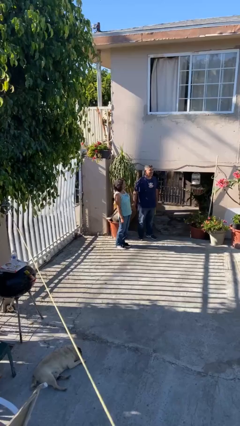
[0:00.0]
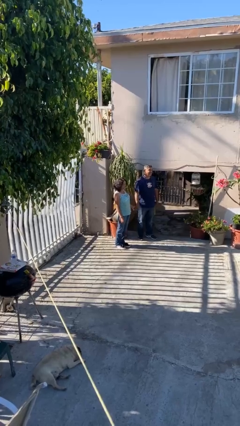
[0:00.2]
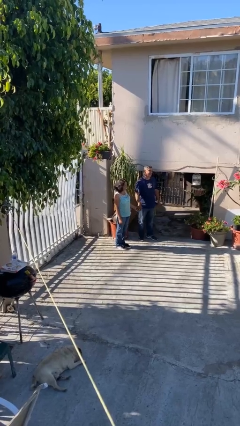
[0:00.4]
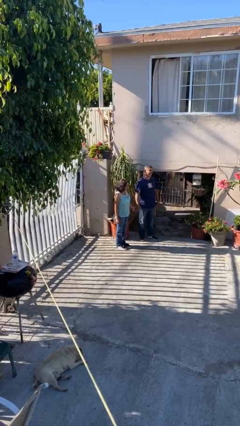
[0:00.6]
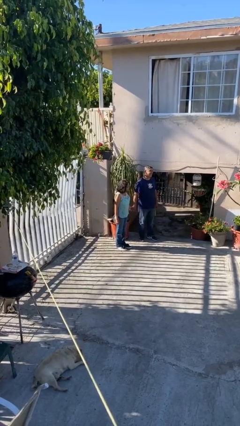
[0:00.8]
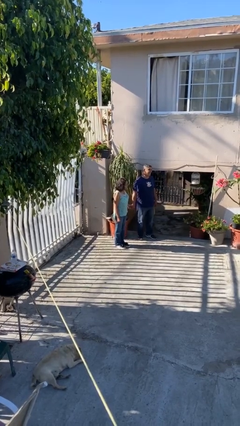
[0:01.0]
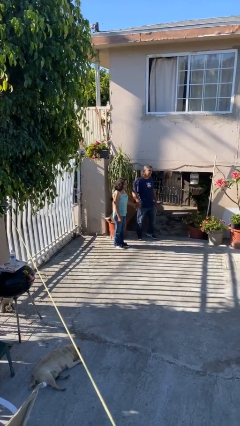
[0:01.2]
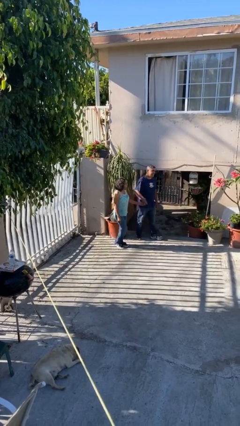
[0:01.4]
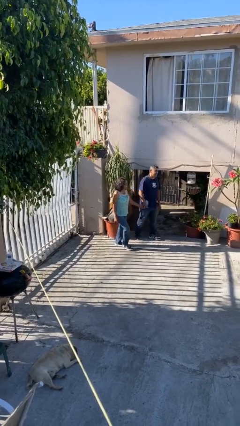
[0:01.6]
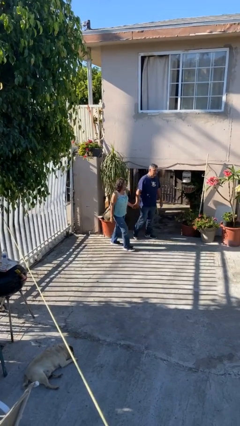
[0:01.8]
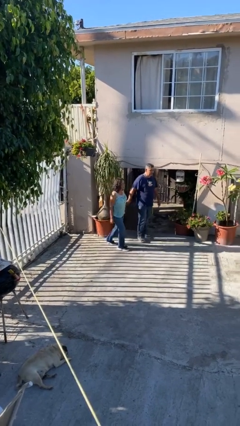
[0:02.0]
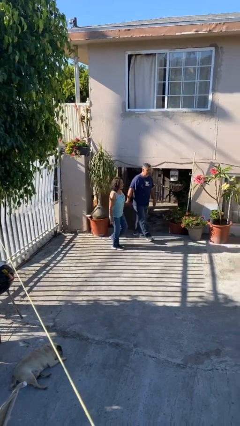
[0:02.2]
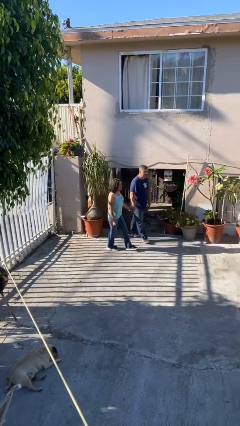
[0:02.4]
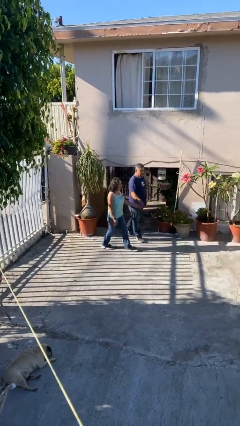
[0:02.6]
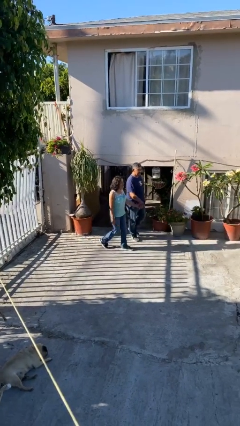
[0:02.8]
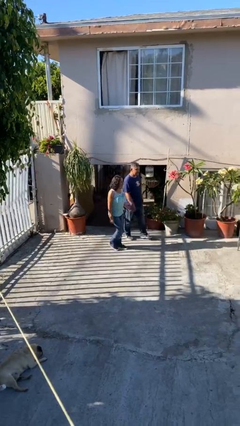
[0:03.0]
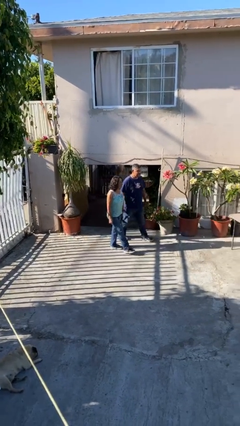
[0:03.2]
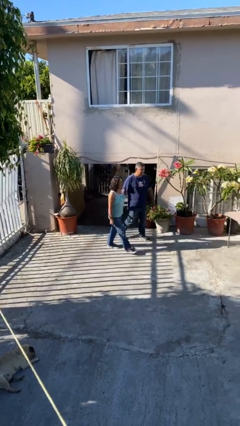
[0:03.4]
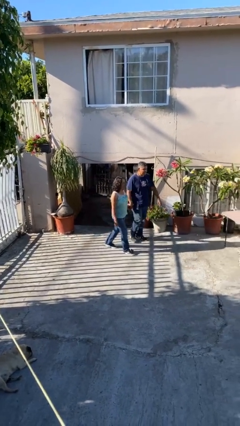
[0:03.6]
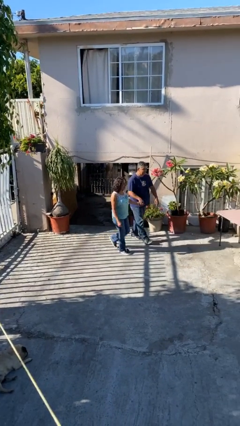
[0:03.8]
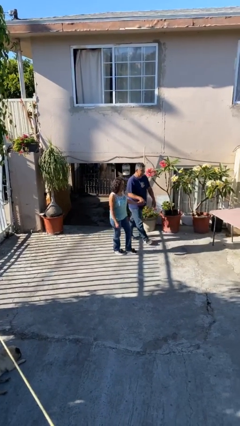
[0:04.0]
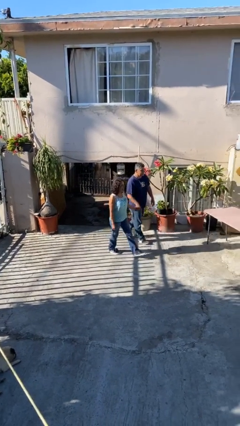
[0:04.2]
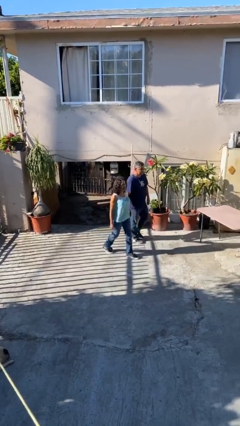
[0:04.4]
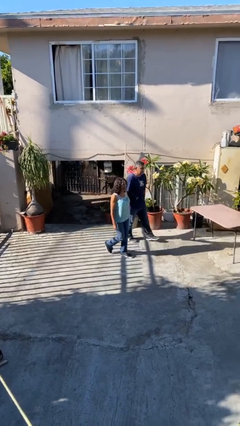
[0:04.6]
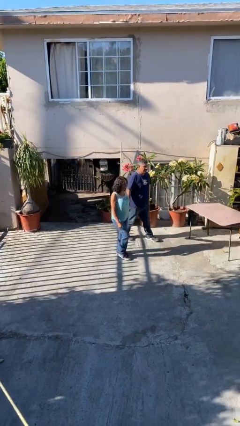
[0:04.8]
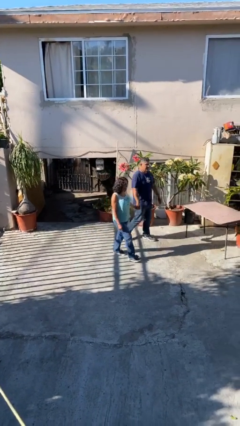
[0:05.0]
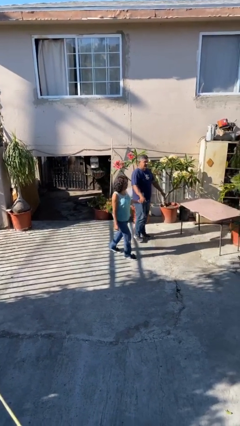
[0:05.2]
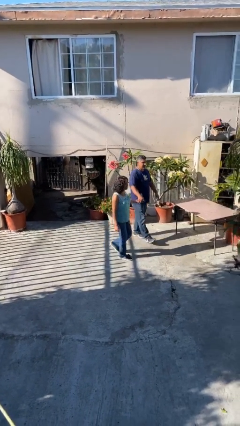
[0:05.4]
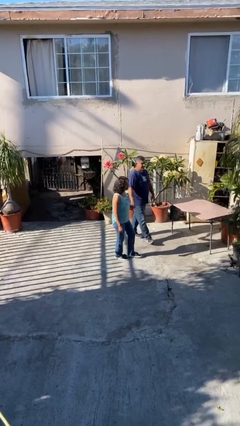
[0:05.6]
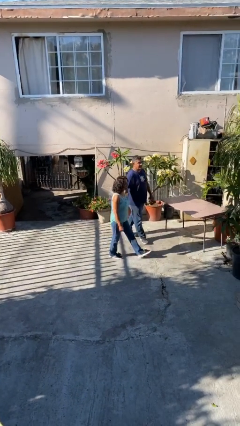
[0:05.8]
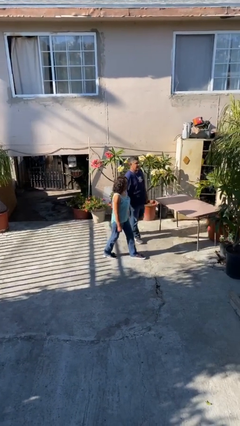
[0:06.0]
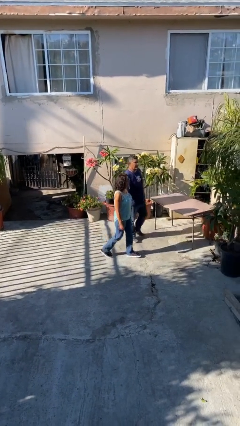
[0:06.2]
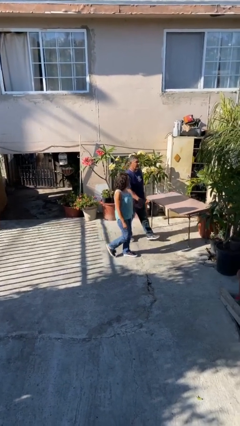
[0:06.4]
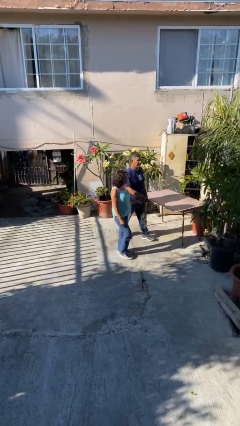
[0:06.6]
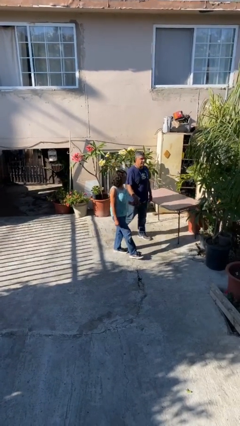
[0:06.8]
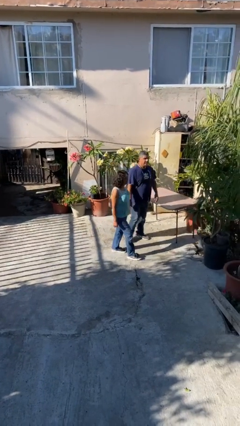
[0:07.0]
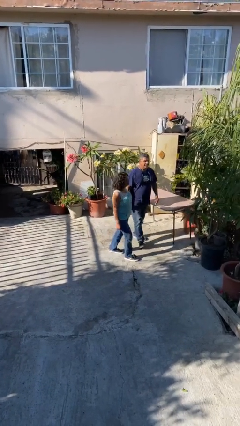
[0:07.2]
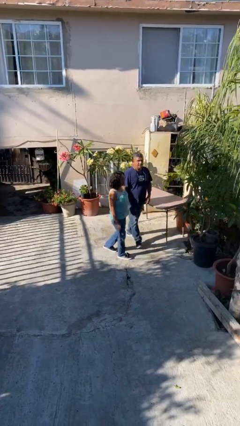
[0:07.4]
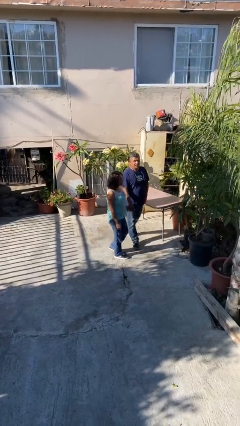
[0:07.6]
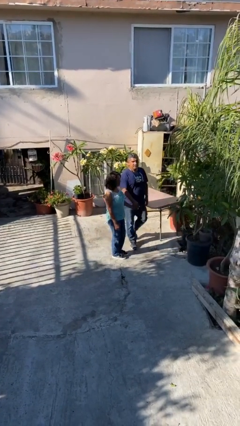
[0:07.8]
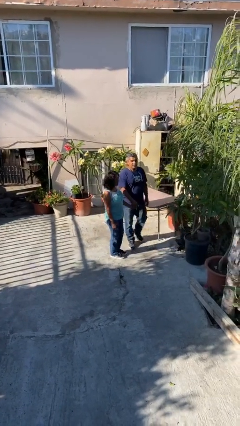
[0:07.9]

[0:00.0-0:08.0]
person holds hand

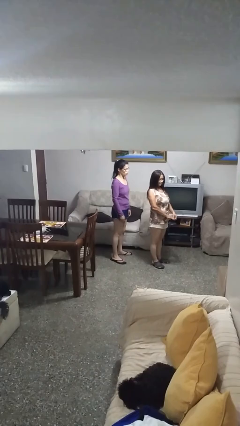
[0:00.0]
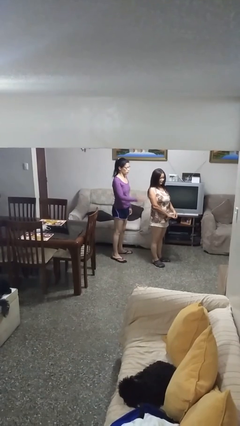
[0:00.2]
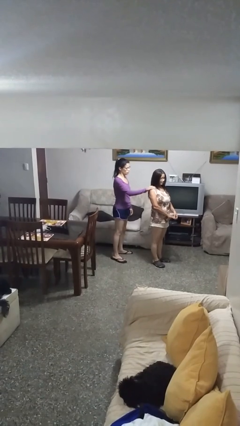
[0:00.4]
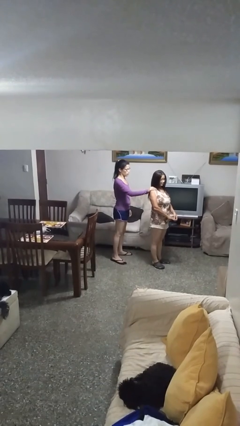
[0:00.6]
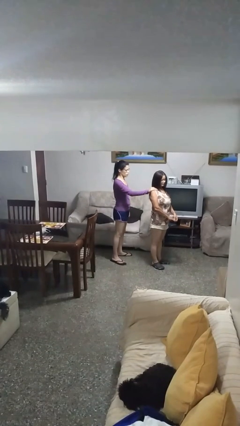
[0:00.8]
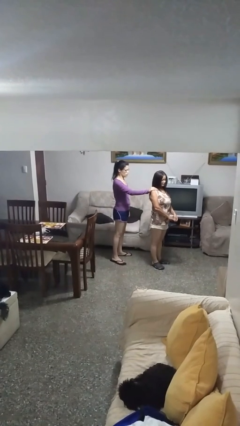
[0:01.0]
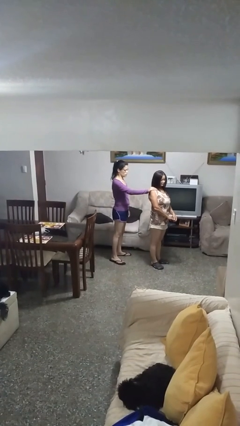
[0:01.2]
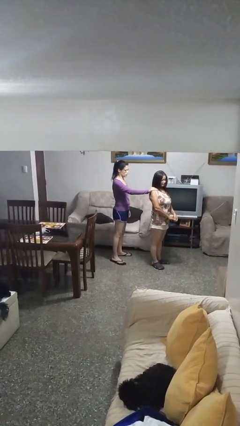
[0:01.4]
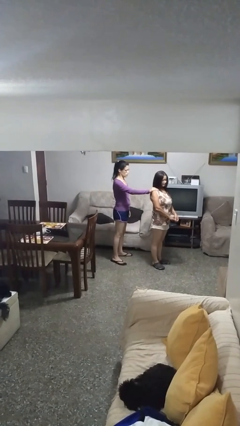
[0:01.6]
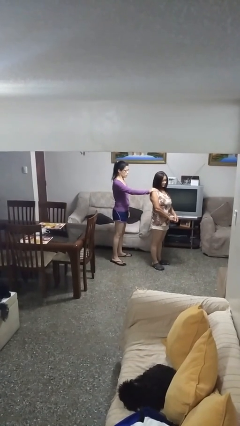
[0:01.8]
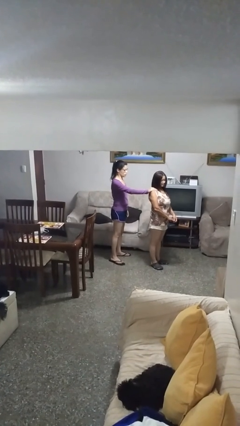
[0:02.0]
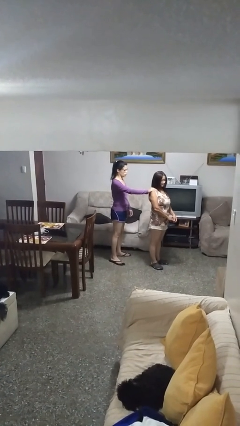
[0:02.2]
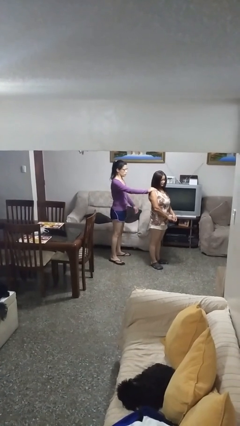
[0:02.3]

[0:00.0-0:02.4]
person grabs person by shoulder

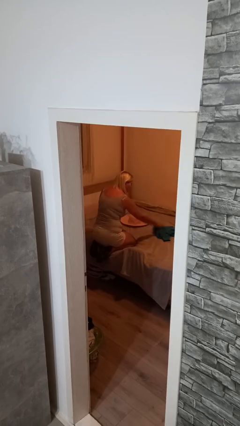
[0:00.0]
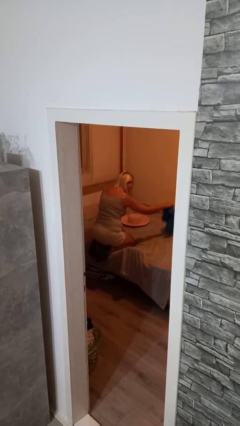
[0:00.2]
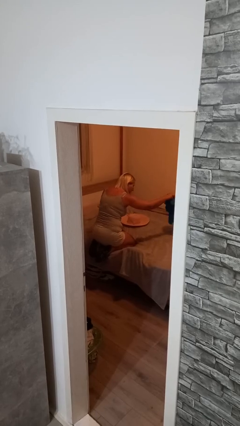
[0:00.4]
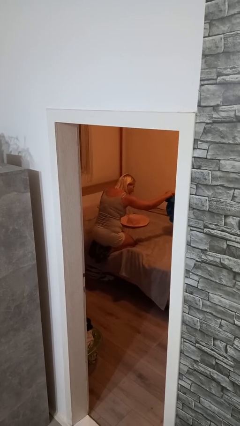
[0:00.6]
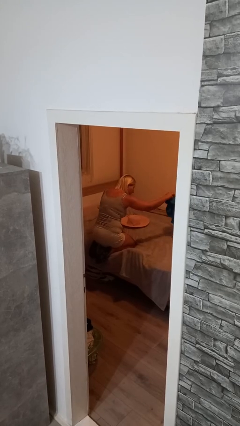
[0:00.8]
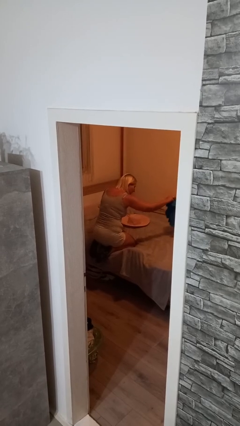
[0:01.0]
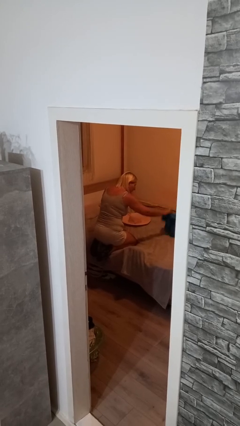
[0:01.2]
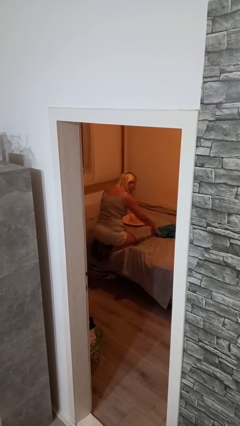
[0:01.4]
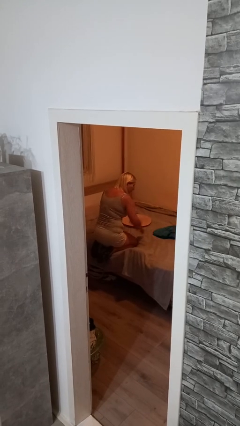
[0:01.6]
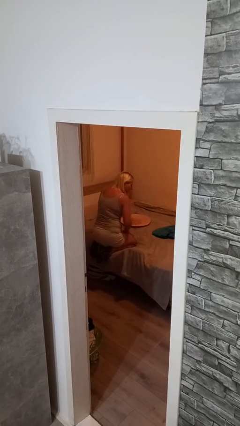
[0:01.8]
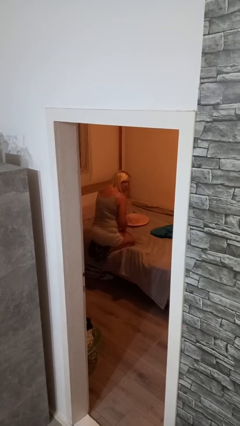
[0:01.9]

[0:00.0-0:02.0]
person searches under bed

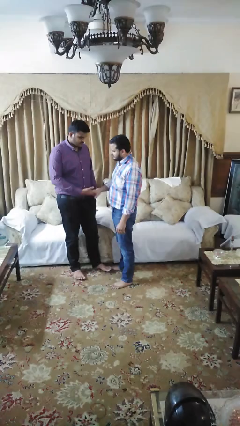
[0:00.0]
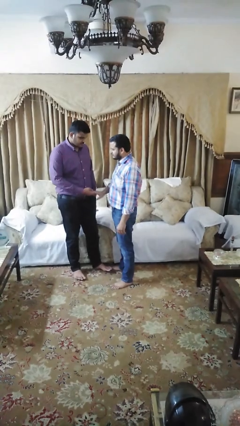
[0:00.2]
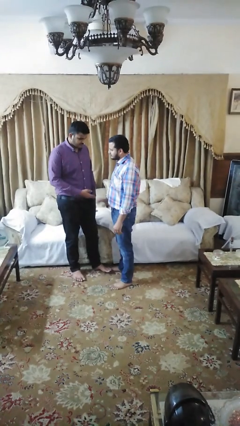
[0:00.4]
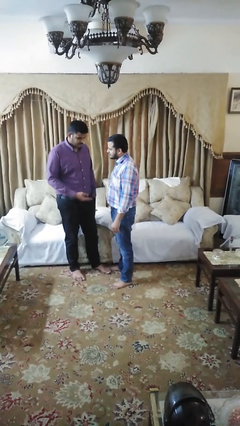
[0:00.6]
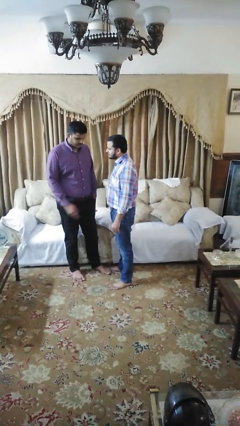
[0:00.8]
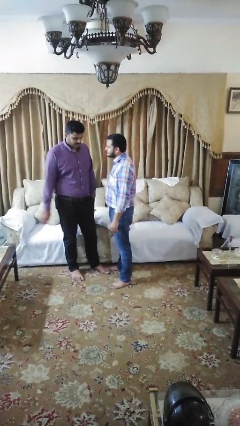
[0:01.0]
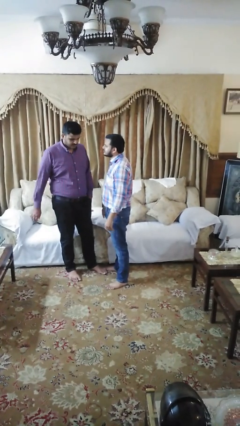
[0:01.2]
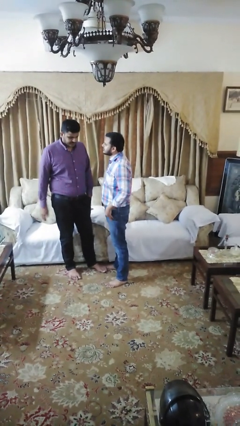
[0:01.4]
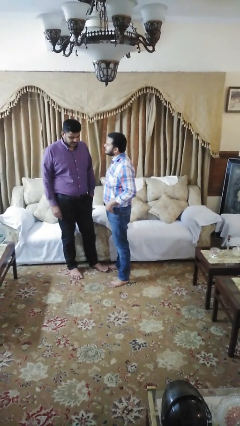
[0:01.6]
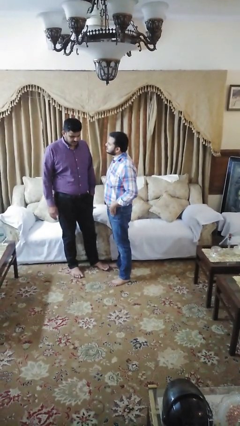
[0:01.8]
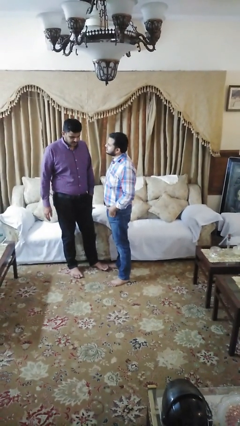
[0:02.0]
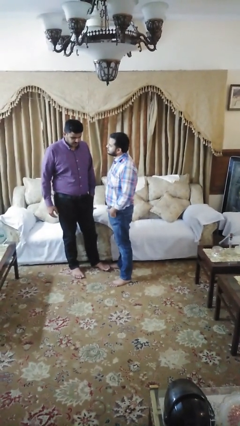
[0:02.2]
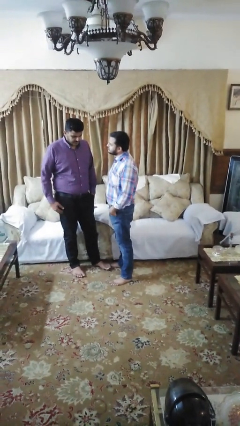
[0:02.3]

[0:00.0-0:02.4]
person highfives hand

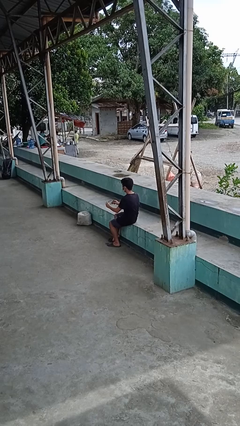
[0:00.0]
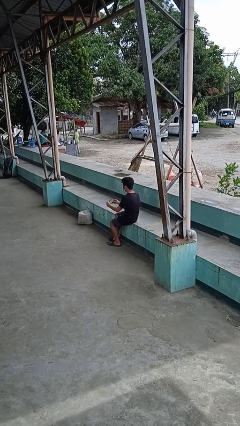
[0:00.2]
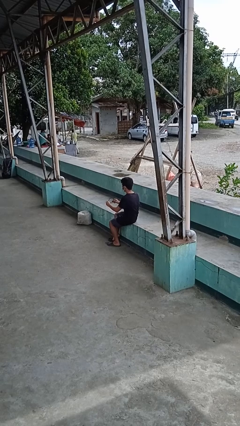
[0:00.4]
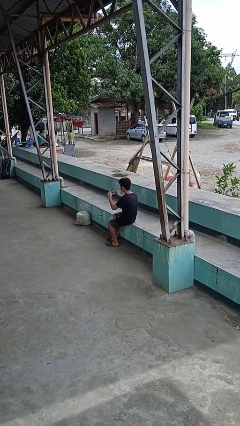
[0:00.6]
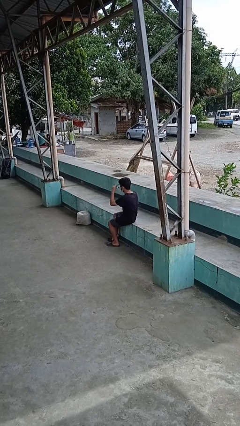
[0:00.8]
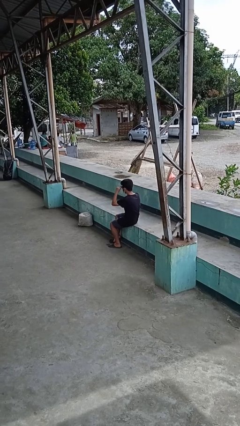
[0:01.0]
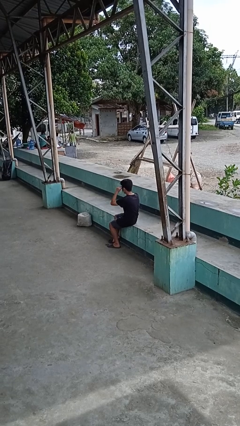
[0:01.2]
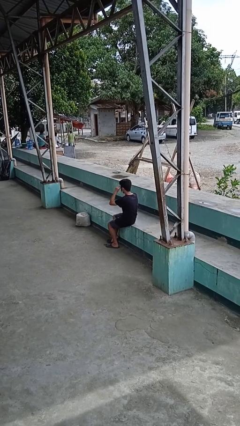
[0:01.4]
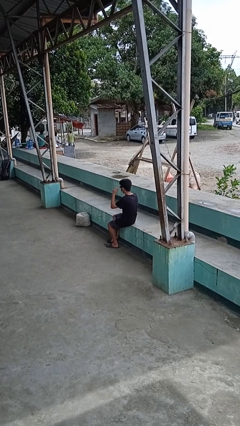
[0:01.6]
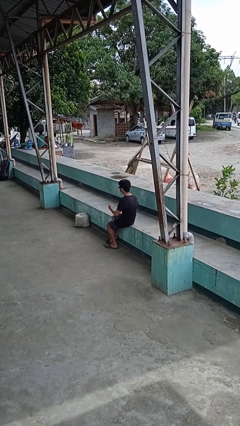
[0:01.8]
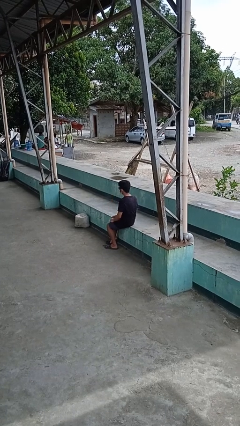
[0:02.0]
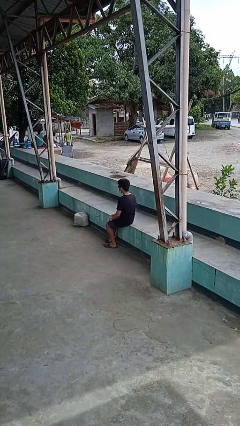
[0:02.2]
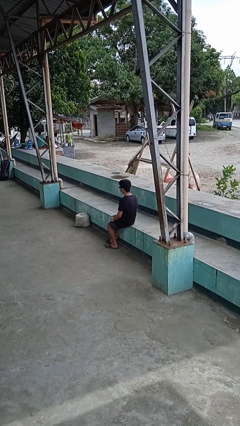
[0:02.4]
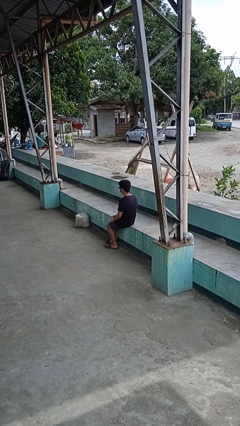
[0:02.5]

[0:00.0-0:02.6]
person puts on sunglasses

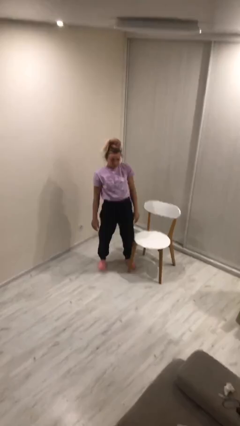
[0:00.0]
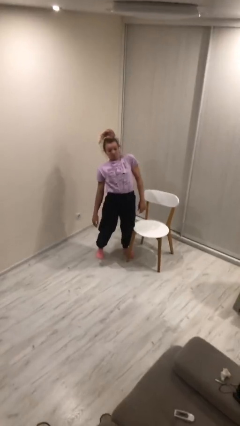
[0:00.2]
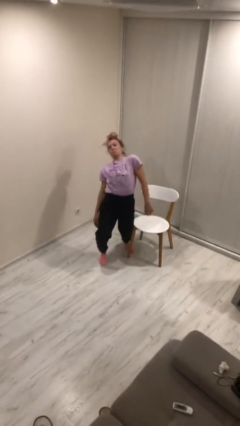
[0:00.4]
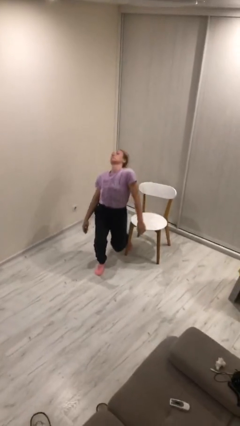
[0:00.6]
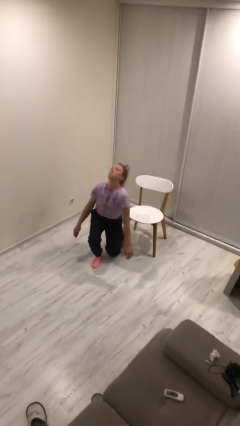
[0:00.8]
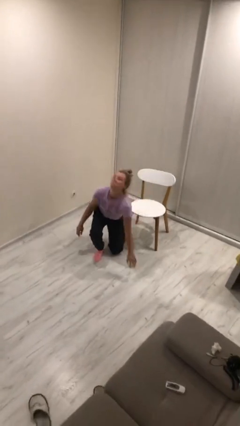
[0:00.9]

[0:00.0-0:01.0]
person trips on object on floor
